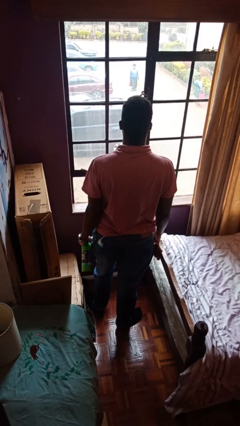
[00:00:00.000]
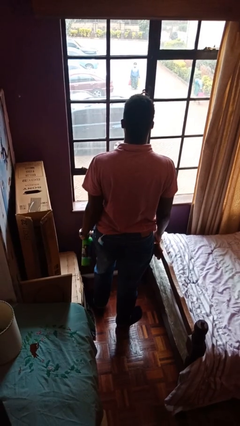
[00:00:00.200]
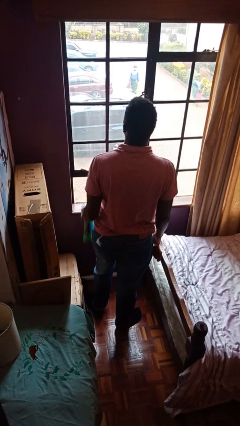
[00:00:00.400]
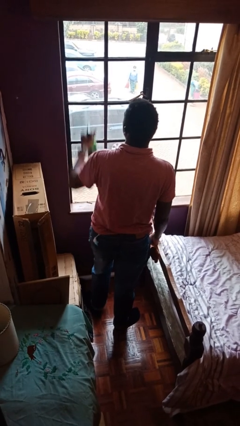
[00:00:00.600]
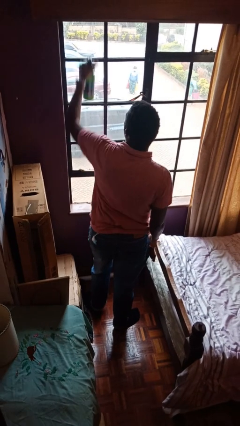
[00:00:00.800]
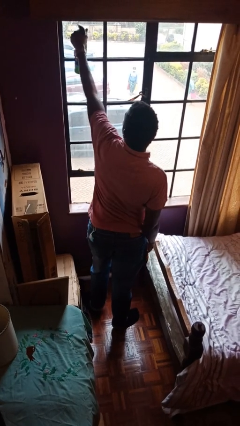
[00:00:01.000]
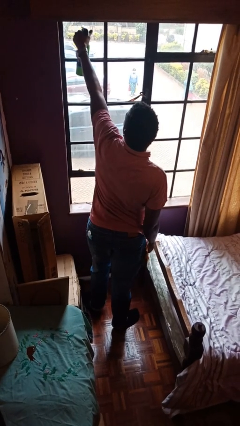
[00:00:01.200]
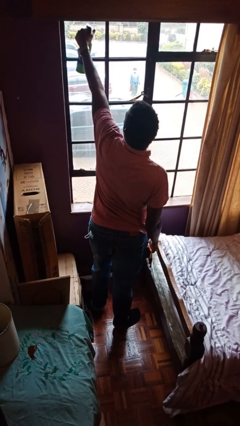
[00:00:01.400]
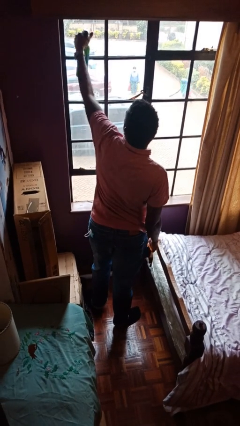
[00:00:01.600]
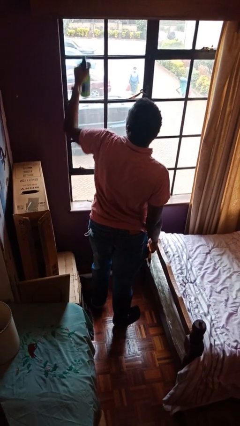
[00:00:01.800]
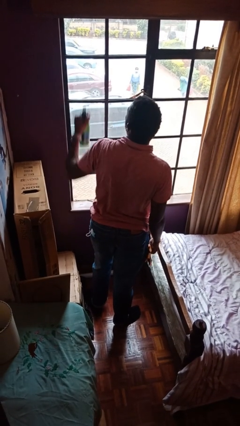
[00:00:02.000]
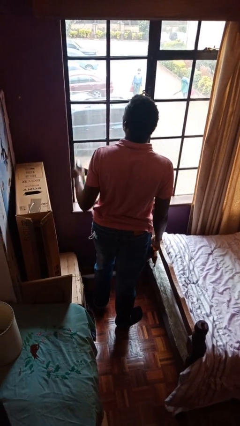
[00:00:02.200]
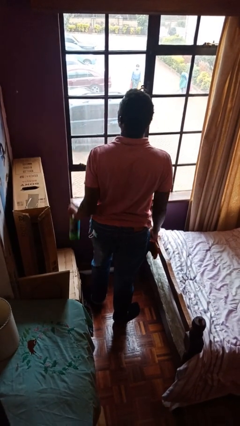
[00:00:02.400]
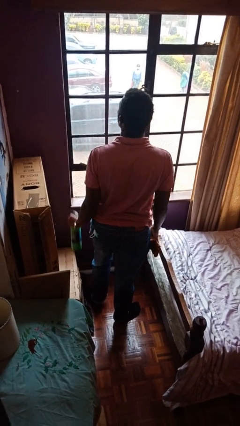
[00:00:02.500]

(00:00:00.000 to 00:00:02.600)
person sprays from bottle

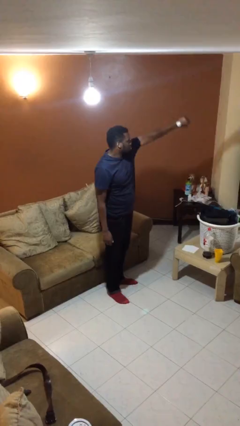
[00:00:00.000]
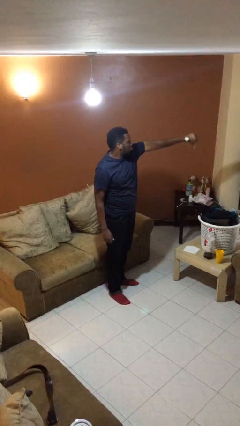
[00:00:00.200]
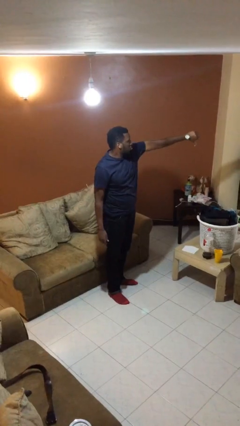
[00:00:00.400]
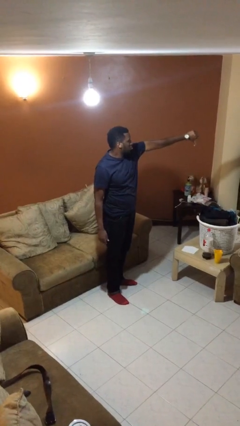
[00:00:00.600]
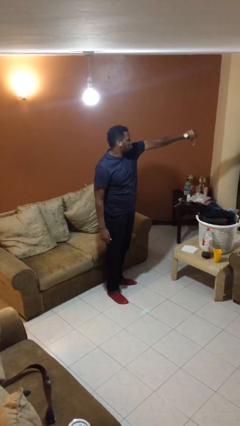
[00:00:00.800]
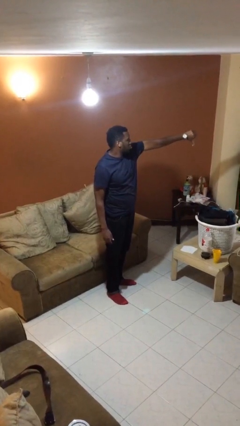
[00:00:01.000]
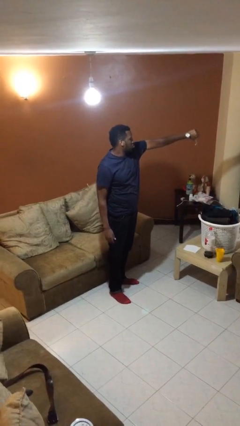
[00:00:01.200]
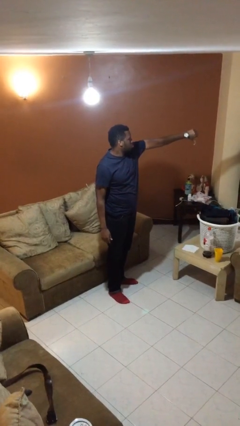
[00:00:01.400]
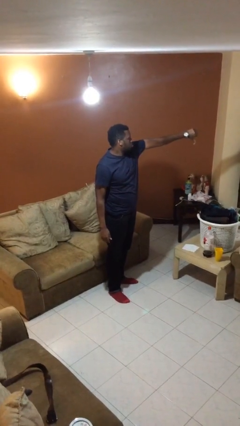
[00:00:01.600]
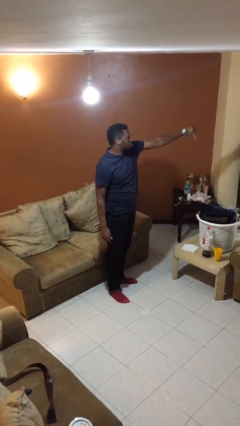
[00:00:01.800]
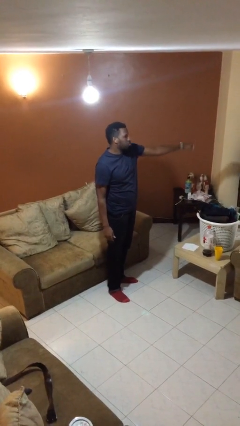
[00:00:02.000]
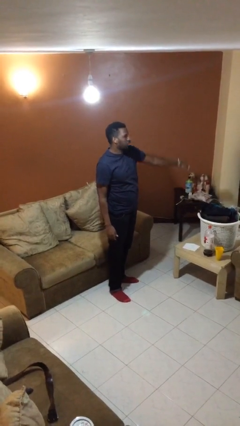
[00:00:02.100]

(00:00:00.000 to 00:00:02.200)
person gestures thumbs down

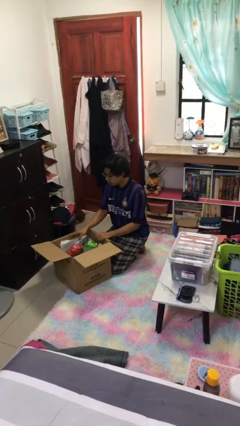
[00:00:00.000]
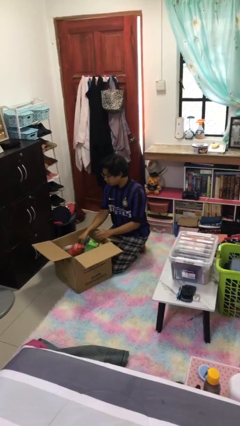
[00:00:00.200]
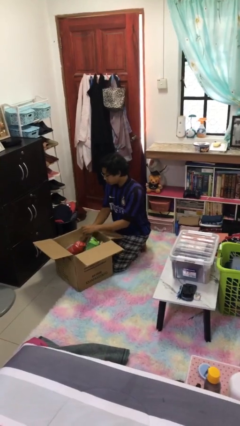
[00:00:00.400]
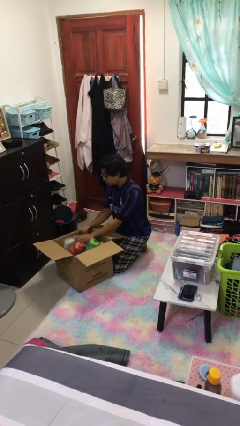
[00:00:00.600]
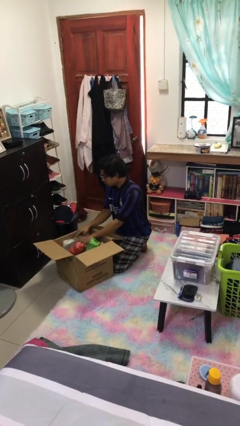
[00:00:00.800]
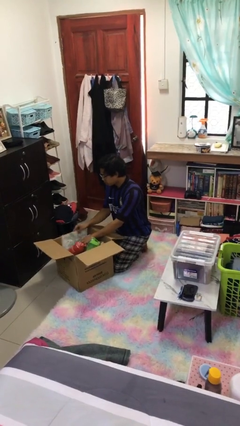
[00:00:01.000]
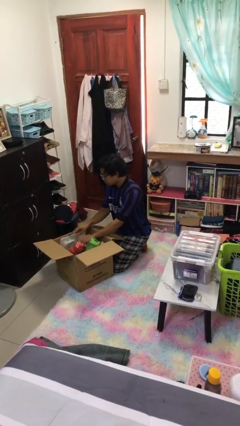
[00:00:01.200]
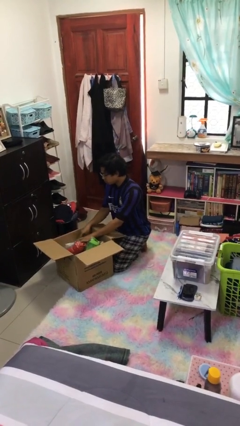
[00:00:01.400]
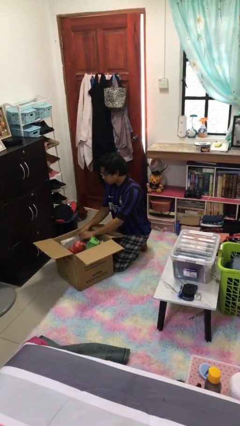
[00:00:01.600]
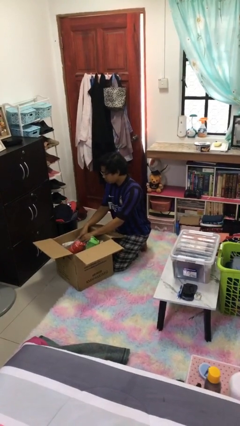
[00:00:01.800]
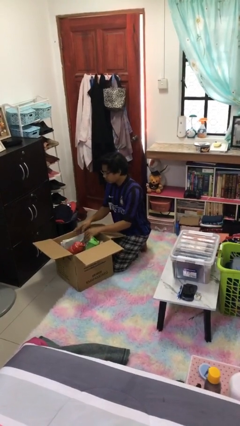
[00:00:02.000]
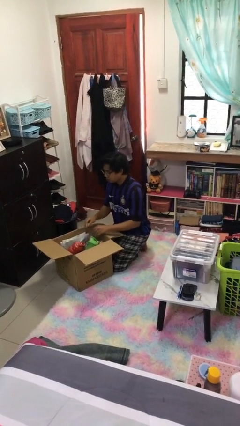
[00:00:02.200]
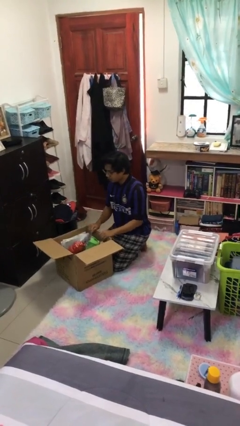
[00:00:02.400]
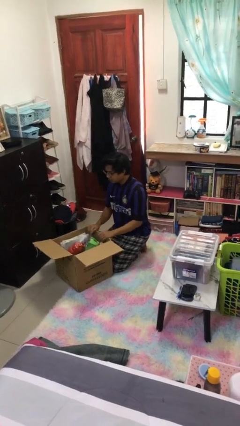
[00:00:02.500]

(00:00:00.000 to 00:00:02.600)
person searches in box

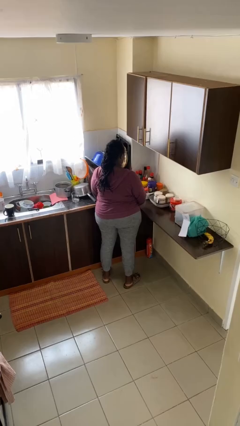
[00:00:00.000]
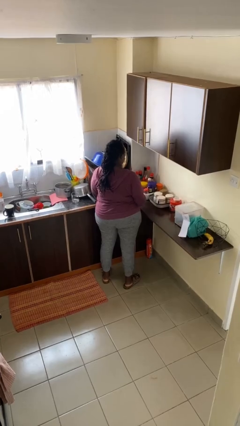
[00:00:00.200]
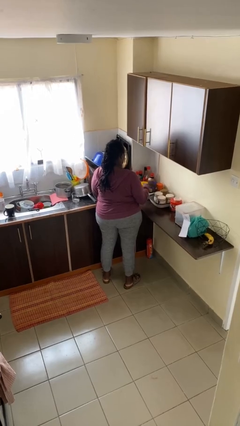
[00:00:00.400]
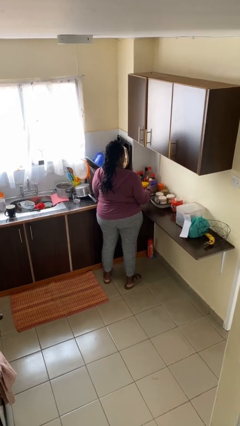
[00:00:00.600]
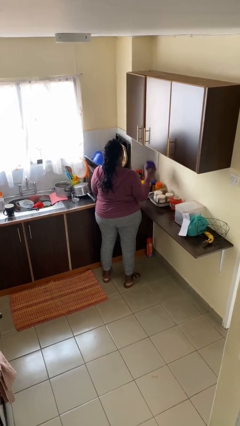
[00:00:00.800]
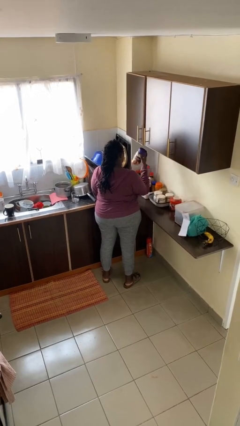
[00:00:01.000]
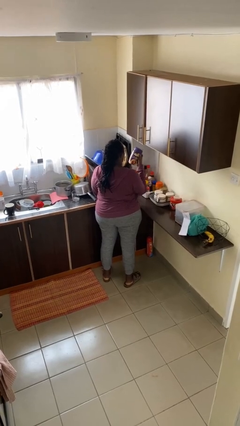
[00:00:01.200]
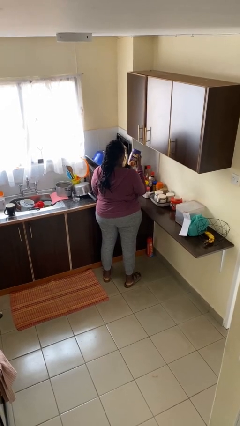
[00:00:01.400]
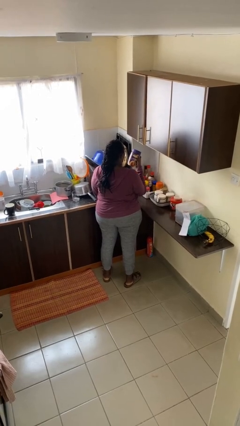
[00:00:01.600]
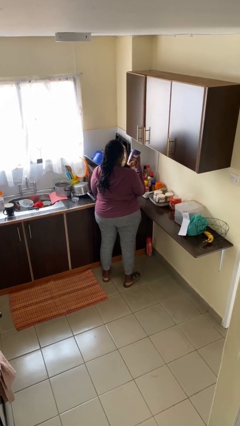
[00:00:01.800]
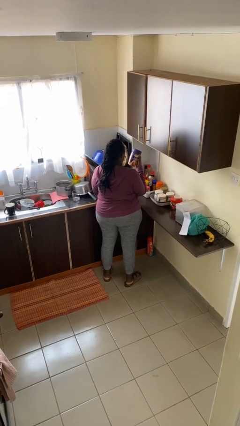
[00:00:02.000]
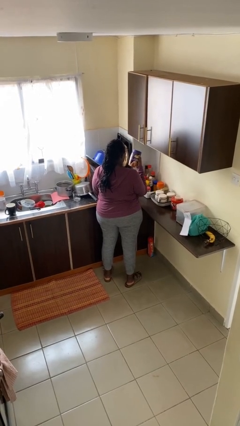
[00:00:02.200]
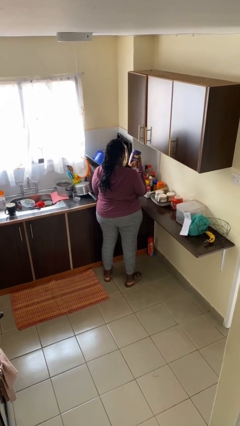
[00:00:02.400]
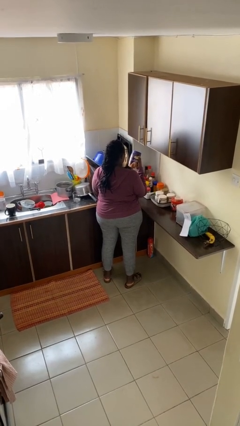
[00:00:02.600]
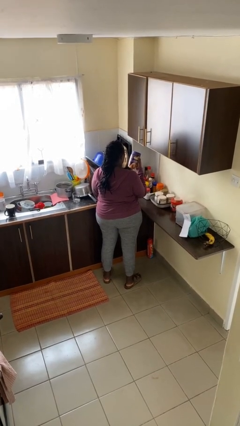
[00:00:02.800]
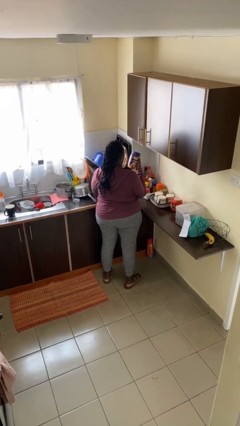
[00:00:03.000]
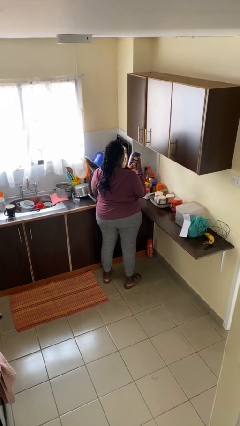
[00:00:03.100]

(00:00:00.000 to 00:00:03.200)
person picks up object from countertop

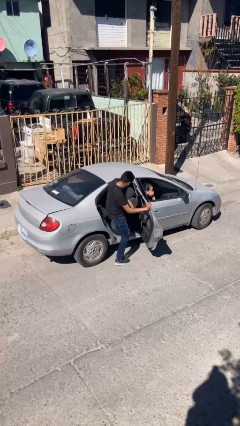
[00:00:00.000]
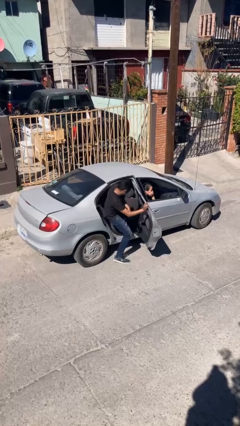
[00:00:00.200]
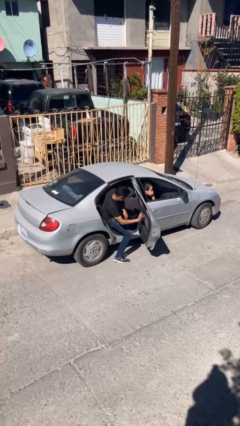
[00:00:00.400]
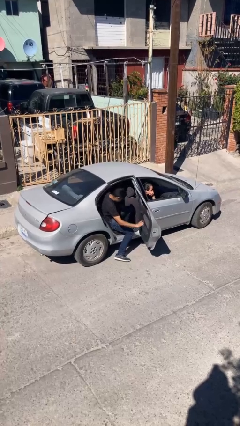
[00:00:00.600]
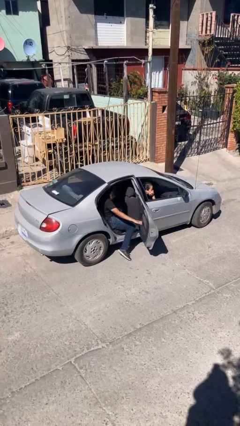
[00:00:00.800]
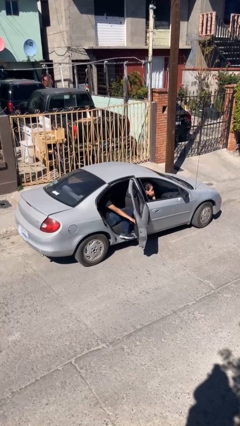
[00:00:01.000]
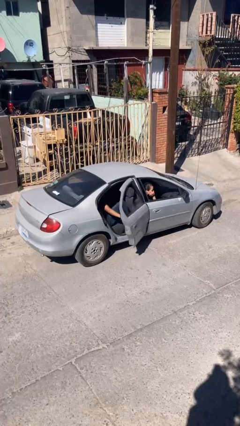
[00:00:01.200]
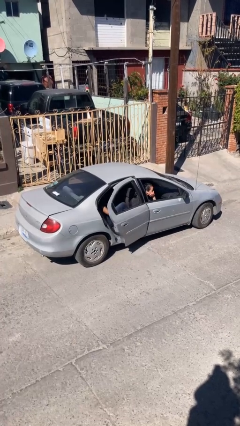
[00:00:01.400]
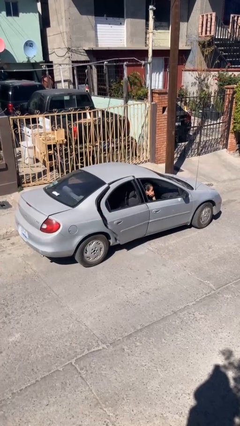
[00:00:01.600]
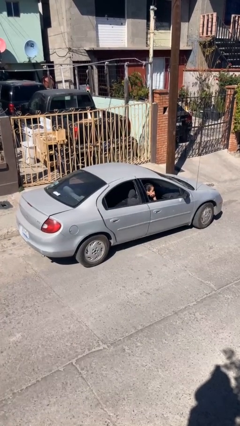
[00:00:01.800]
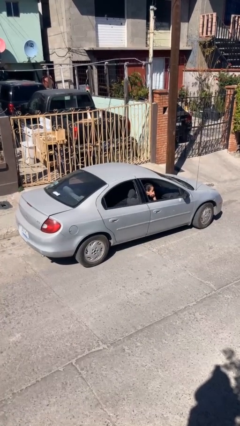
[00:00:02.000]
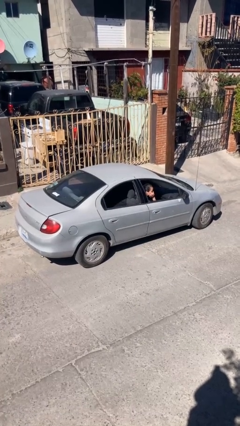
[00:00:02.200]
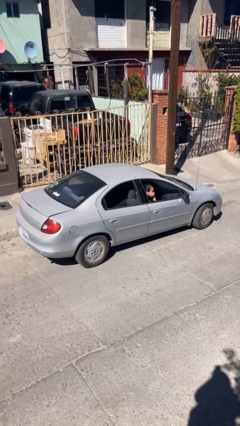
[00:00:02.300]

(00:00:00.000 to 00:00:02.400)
car picks up person

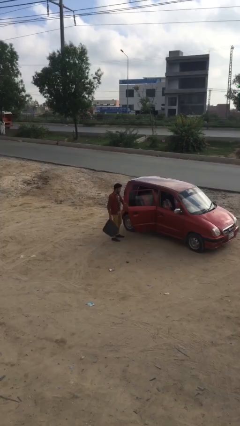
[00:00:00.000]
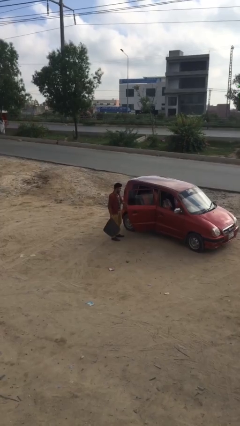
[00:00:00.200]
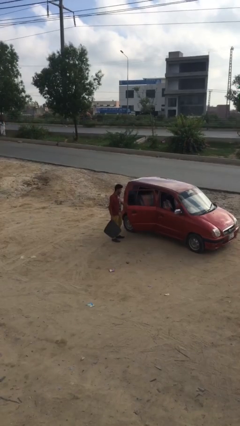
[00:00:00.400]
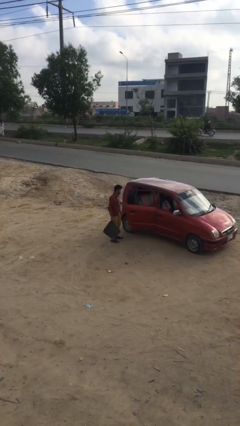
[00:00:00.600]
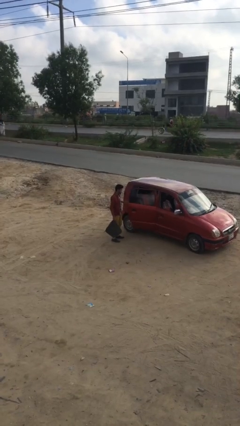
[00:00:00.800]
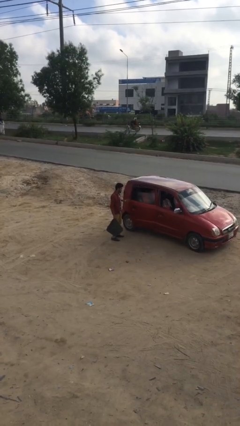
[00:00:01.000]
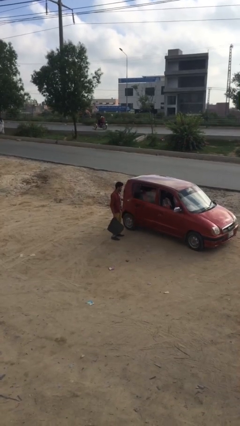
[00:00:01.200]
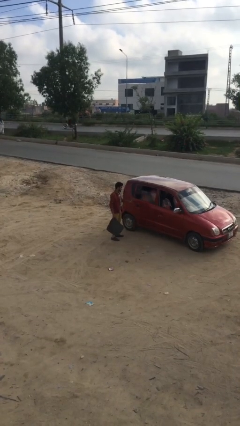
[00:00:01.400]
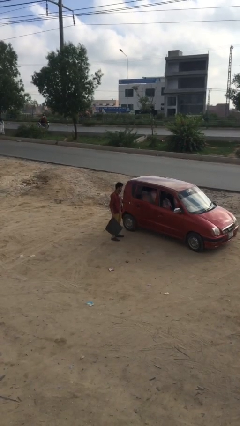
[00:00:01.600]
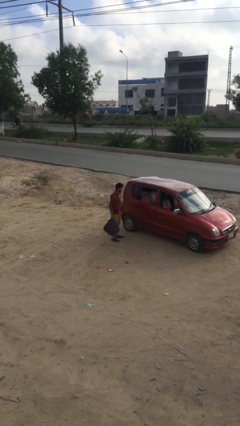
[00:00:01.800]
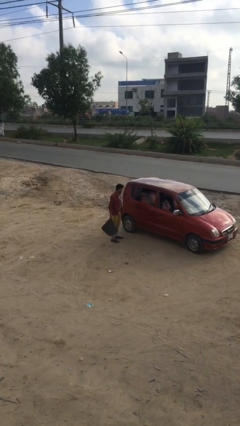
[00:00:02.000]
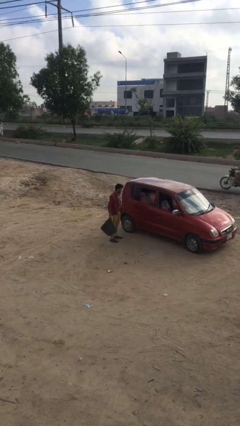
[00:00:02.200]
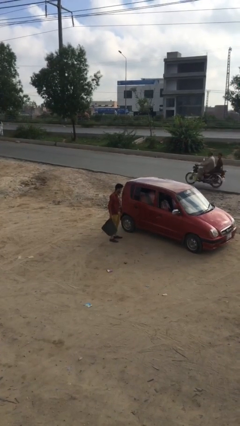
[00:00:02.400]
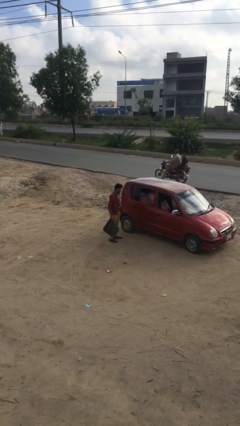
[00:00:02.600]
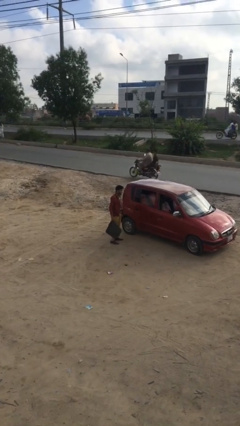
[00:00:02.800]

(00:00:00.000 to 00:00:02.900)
person closes car door

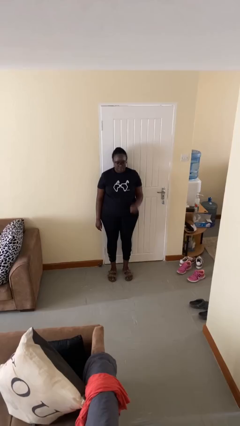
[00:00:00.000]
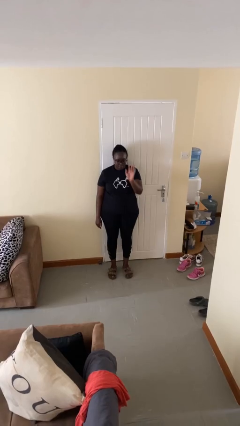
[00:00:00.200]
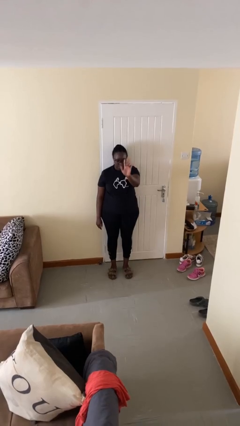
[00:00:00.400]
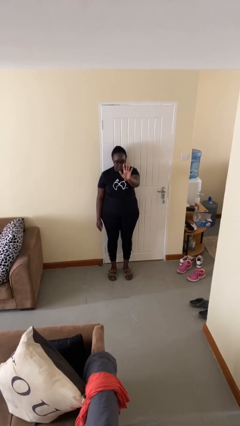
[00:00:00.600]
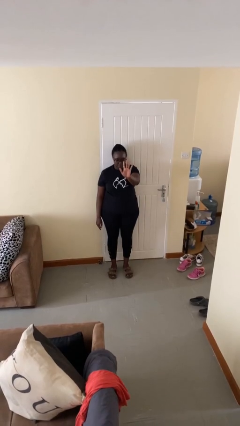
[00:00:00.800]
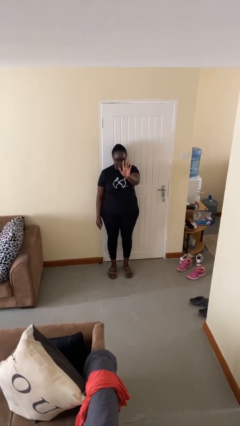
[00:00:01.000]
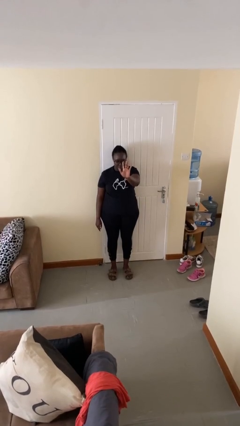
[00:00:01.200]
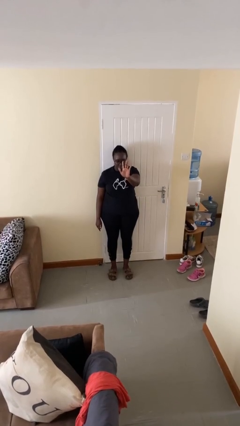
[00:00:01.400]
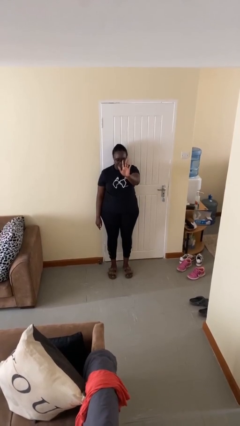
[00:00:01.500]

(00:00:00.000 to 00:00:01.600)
person gestures number five
